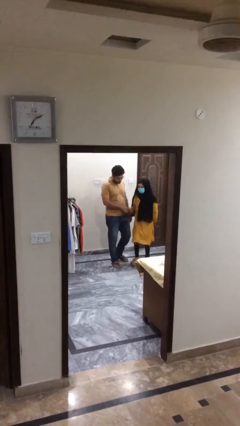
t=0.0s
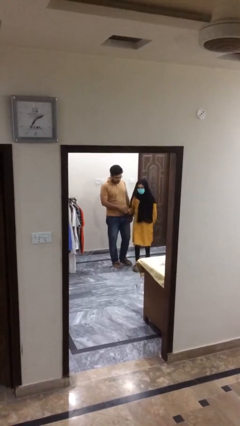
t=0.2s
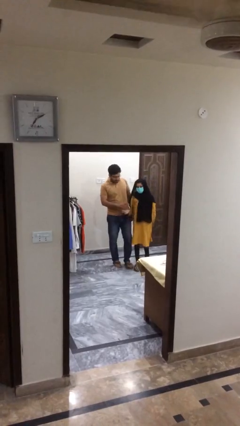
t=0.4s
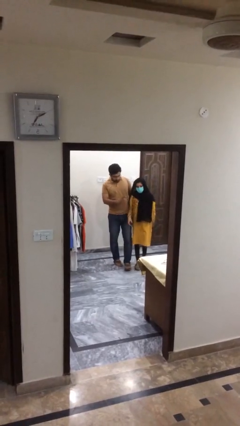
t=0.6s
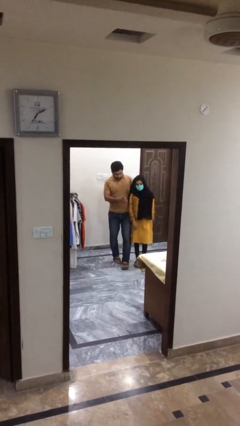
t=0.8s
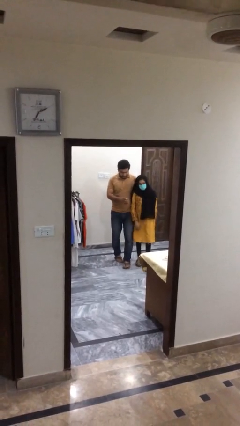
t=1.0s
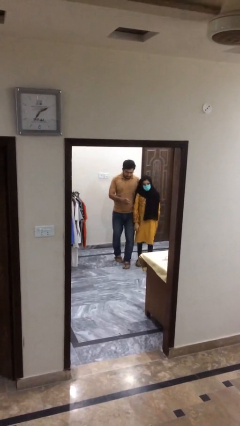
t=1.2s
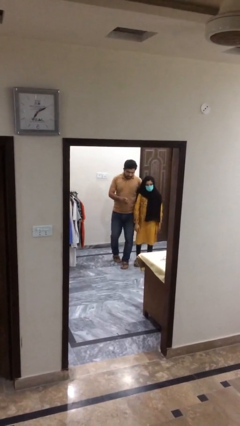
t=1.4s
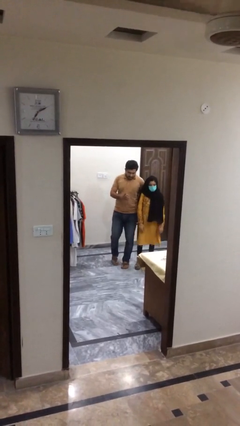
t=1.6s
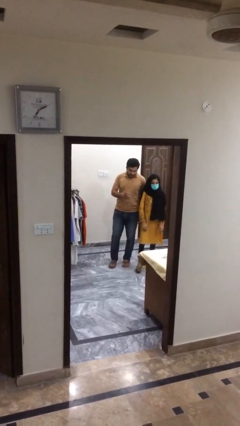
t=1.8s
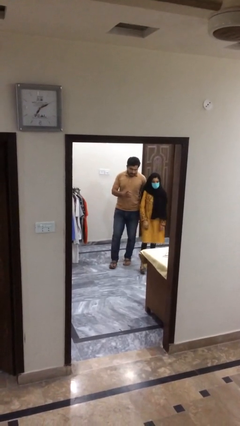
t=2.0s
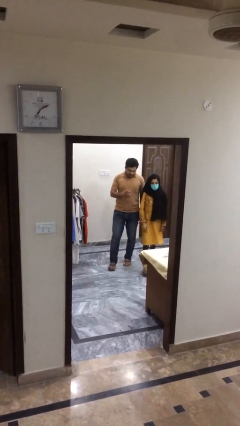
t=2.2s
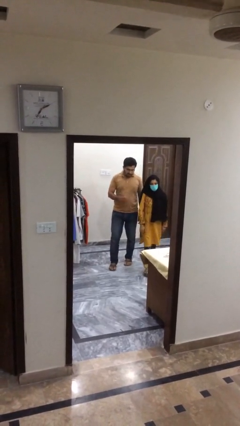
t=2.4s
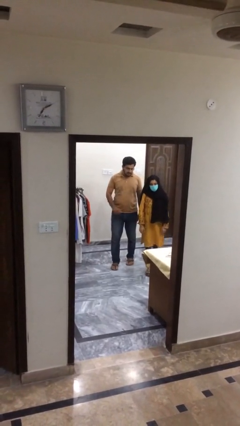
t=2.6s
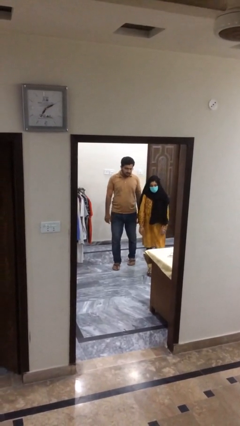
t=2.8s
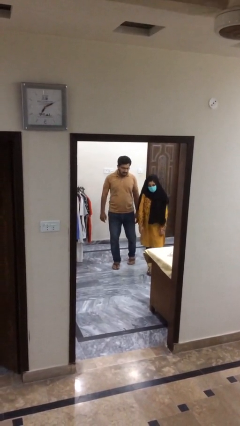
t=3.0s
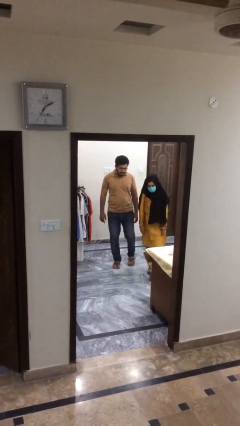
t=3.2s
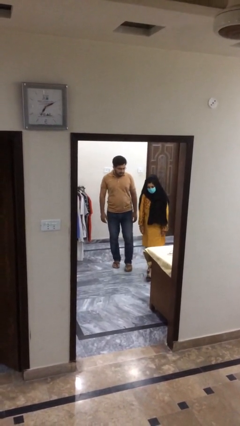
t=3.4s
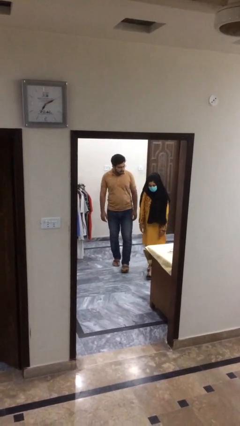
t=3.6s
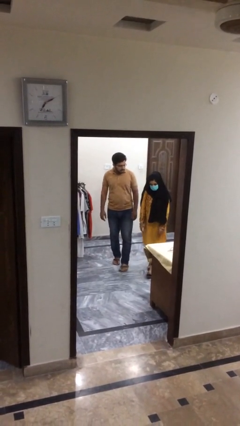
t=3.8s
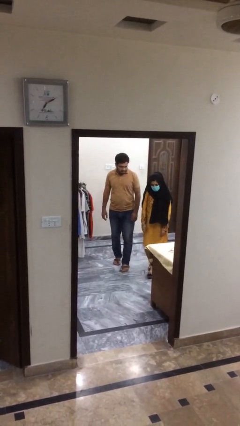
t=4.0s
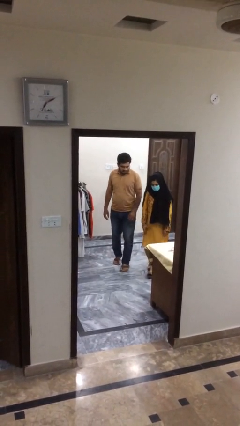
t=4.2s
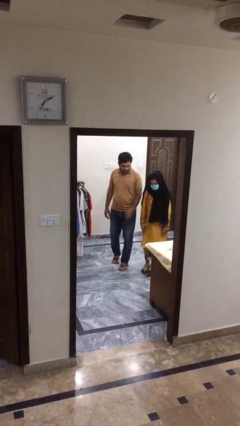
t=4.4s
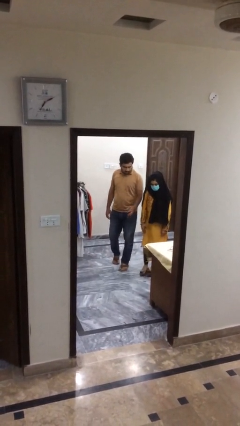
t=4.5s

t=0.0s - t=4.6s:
person talks to person

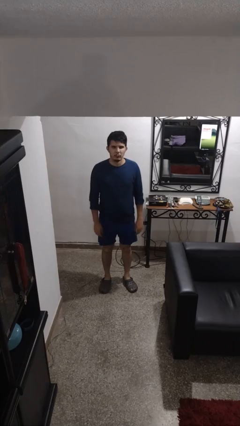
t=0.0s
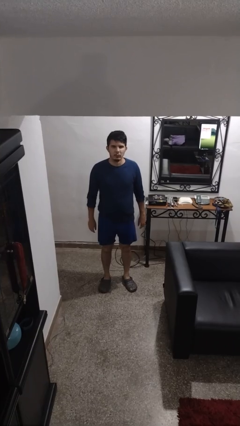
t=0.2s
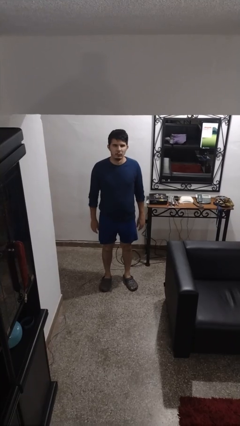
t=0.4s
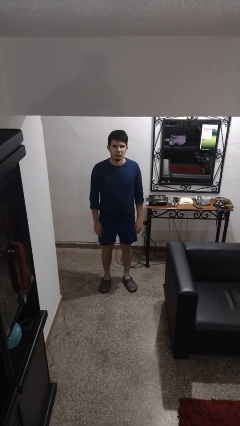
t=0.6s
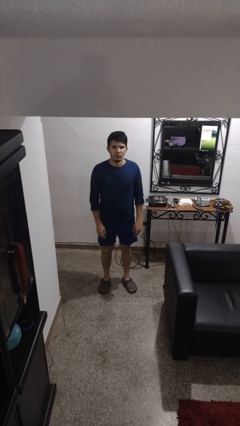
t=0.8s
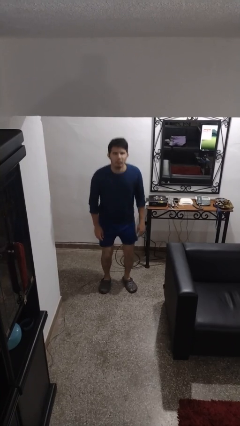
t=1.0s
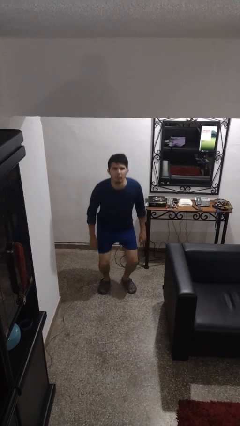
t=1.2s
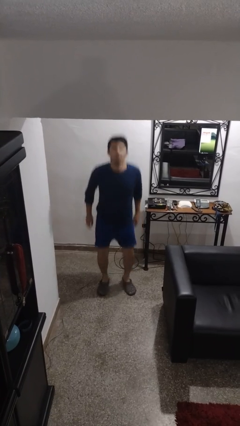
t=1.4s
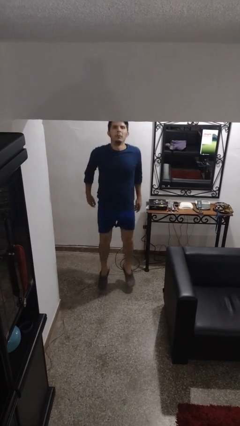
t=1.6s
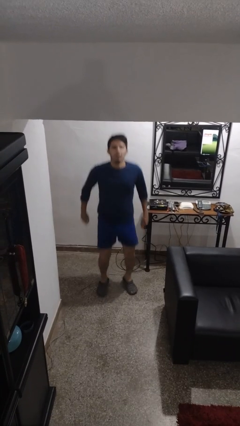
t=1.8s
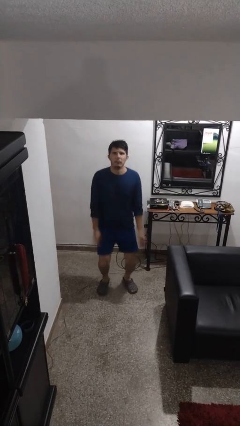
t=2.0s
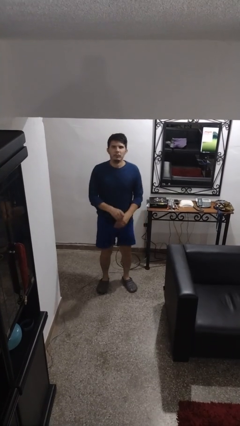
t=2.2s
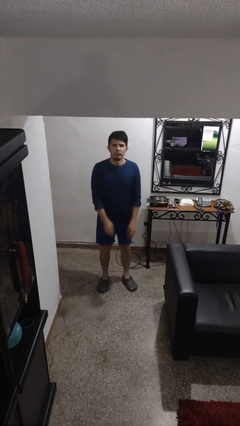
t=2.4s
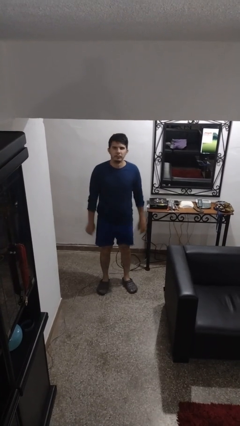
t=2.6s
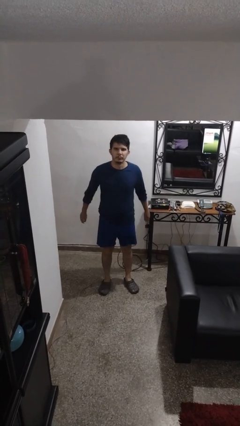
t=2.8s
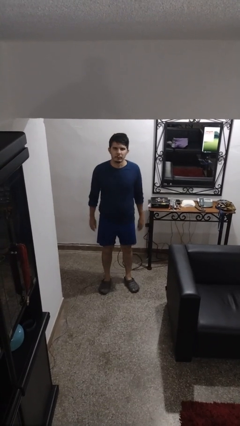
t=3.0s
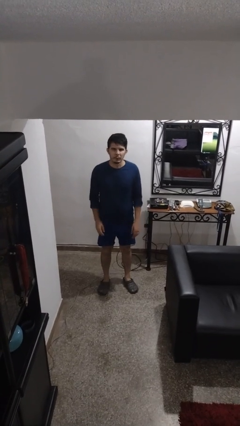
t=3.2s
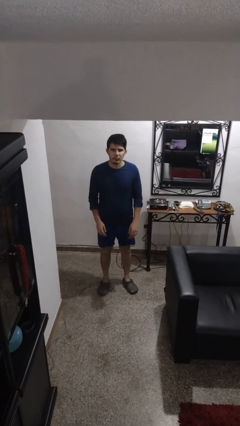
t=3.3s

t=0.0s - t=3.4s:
person jumps

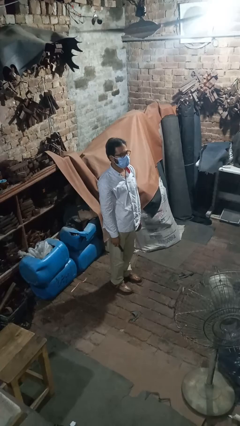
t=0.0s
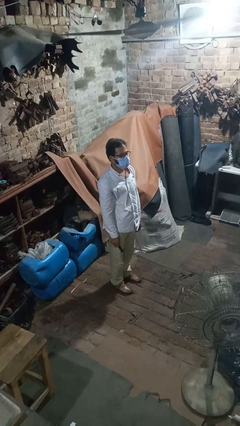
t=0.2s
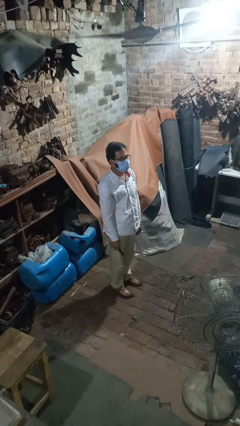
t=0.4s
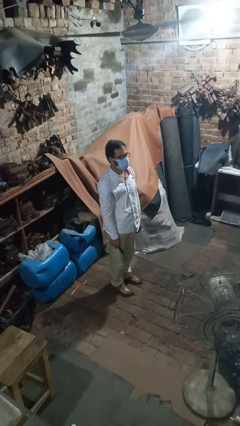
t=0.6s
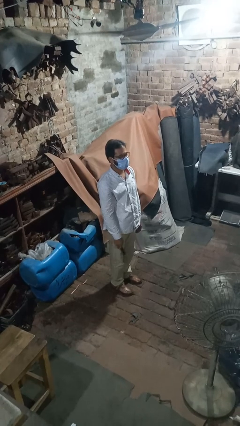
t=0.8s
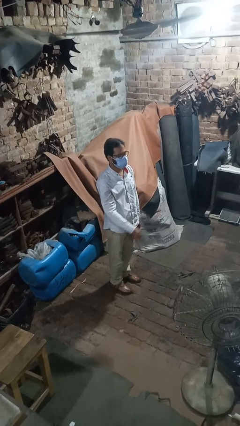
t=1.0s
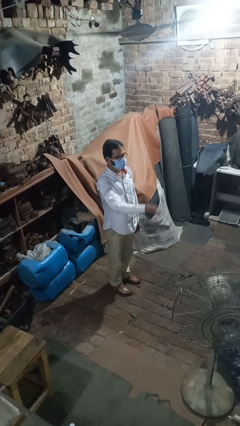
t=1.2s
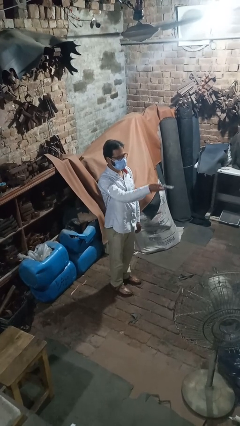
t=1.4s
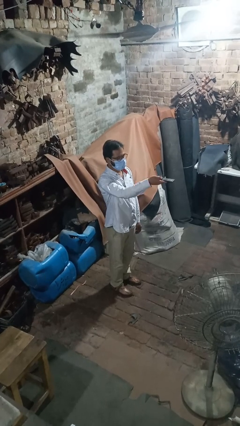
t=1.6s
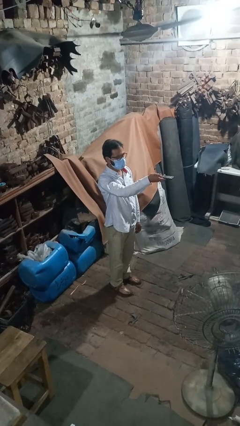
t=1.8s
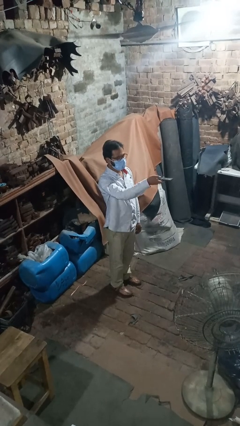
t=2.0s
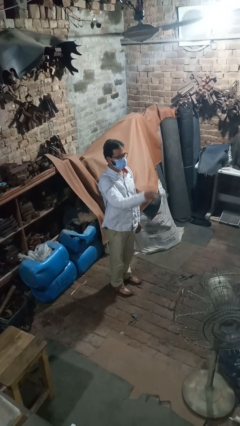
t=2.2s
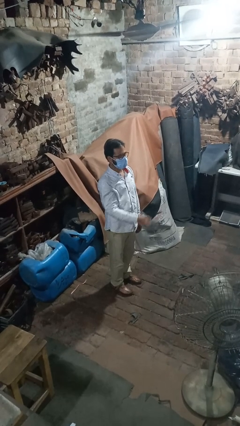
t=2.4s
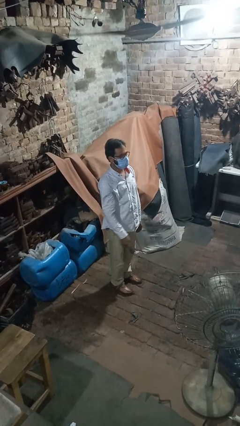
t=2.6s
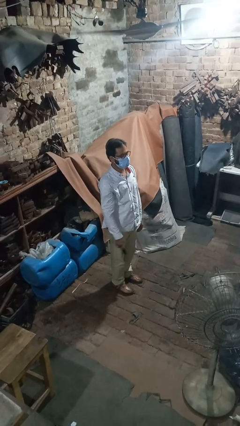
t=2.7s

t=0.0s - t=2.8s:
person uses television remote

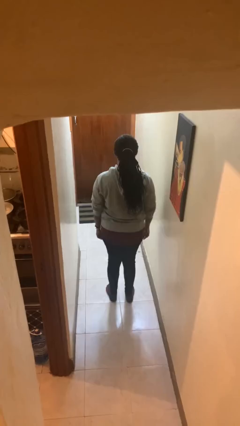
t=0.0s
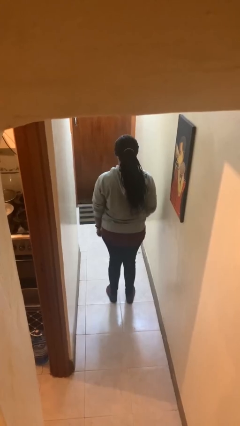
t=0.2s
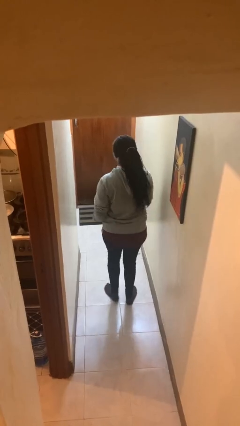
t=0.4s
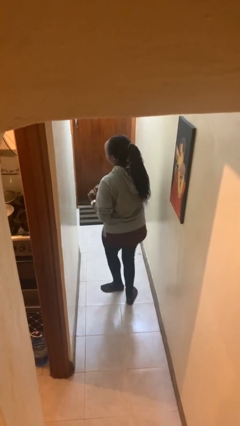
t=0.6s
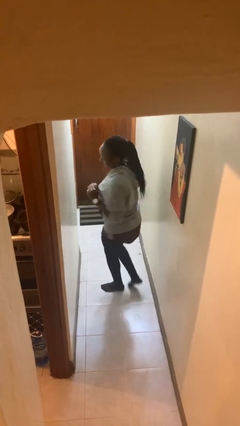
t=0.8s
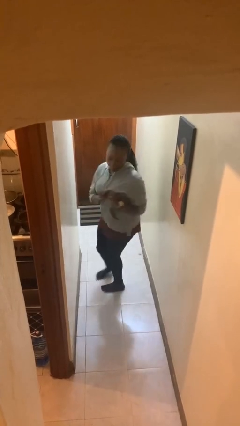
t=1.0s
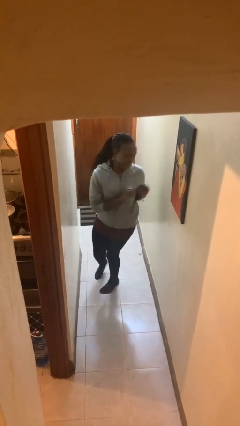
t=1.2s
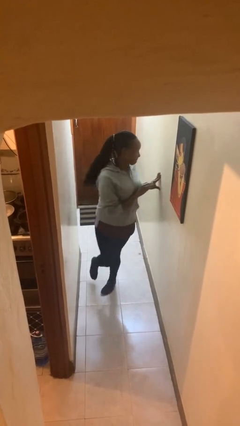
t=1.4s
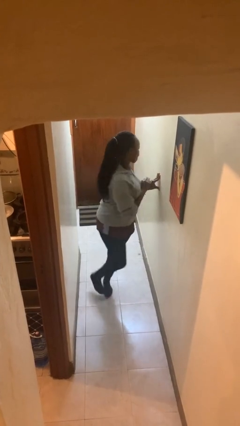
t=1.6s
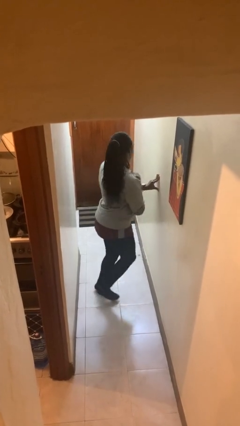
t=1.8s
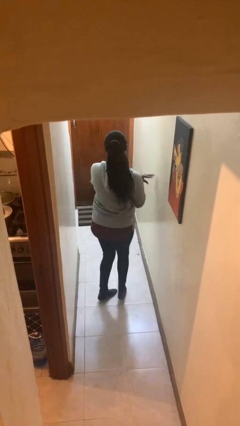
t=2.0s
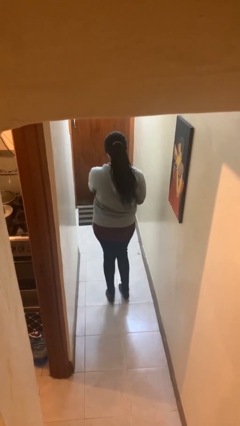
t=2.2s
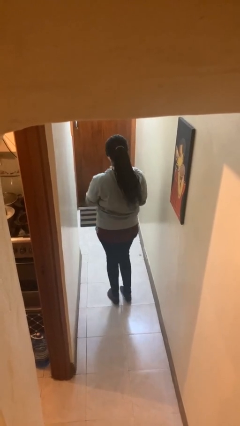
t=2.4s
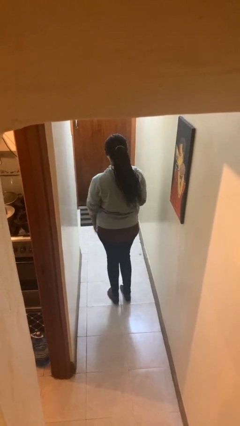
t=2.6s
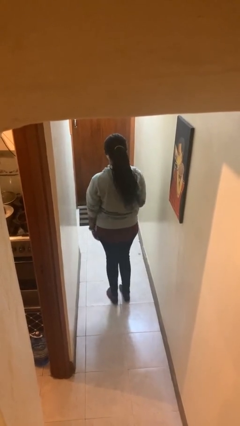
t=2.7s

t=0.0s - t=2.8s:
person twirls

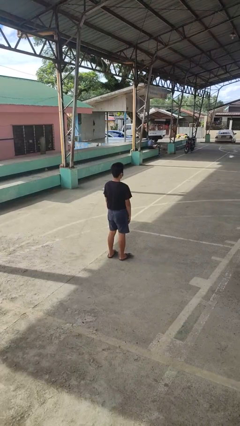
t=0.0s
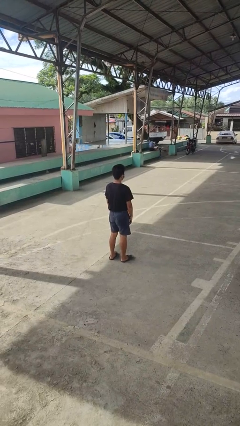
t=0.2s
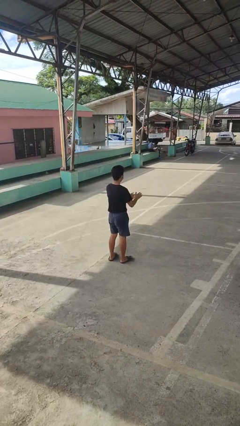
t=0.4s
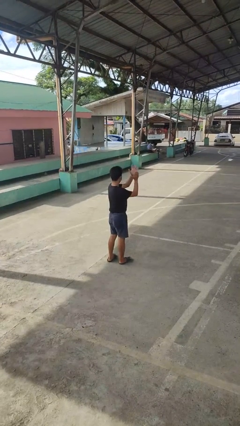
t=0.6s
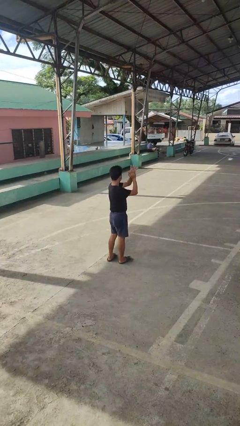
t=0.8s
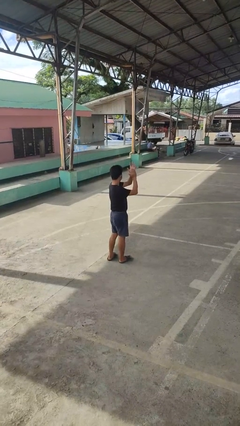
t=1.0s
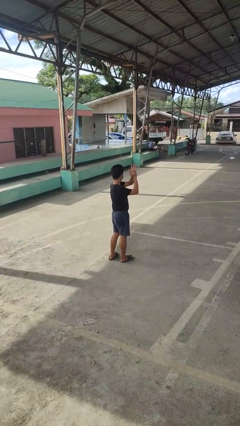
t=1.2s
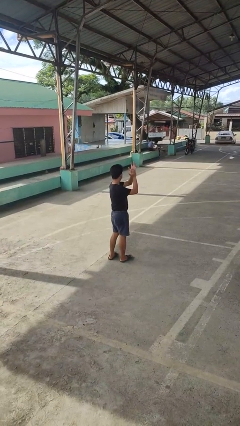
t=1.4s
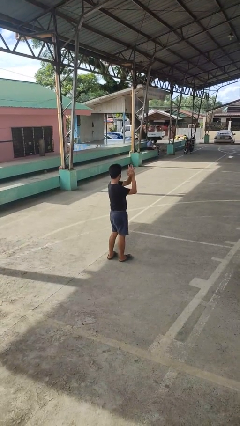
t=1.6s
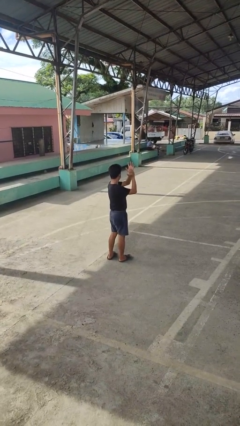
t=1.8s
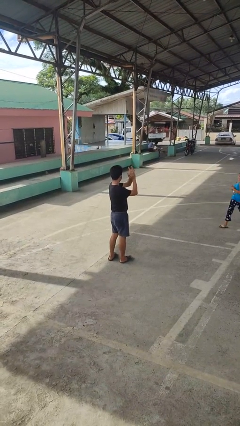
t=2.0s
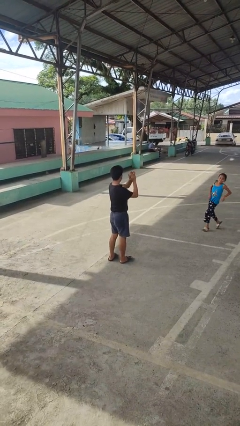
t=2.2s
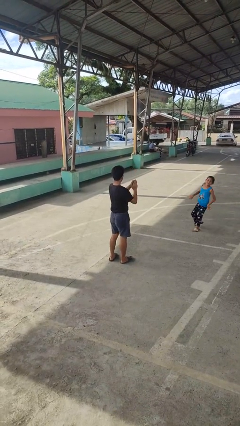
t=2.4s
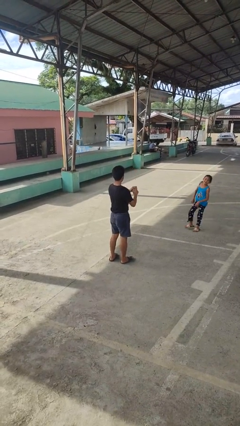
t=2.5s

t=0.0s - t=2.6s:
person claps hands

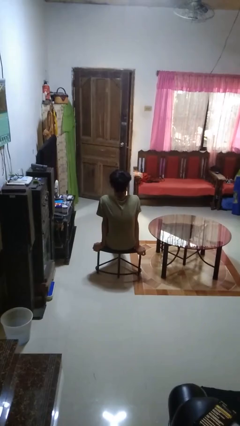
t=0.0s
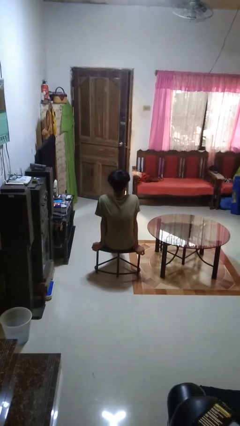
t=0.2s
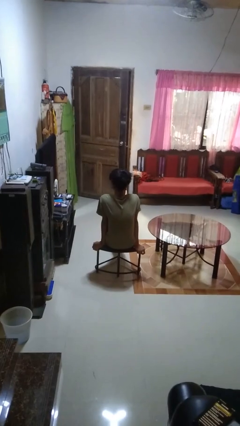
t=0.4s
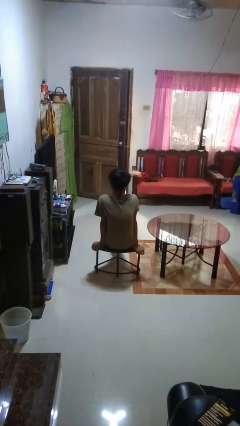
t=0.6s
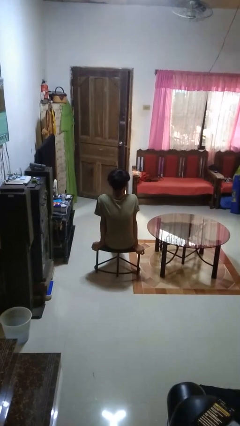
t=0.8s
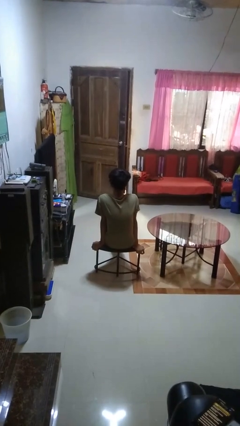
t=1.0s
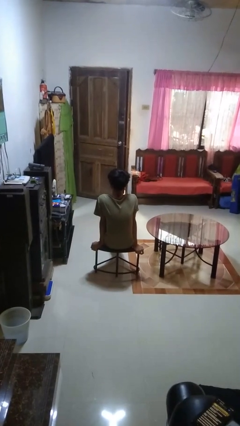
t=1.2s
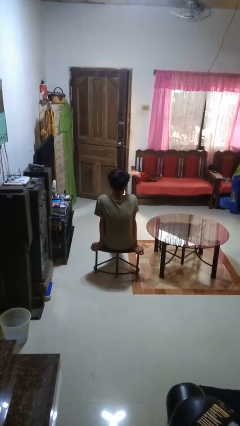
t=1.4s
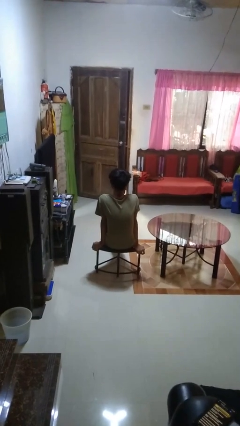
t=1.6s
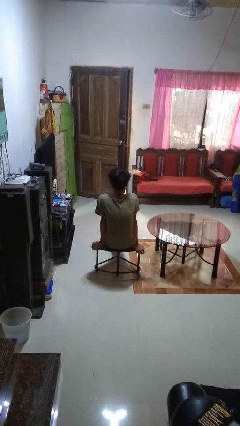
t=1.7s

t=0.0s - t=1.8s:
person shakes head
